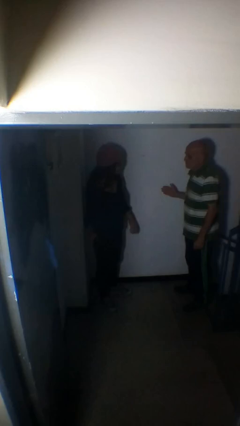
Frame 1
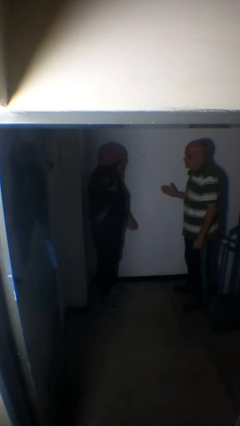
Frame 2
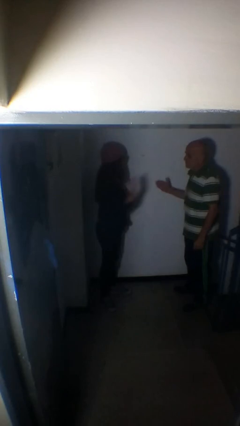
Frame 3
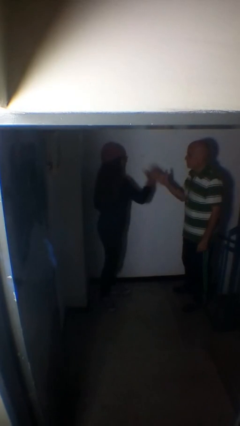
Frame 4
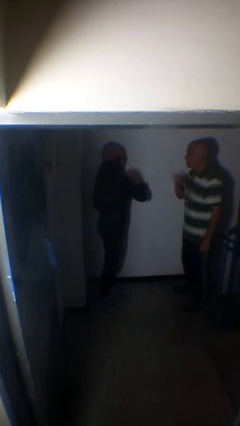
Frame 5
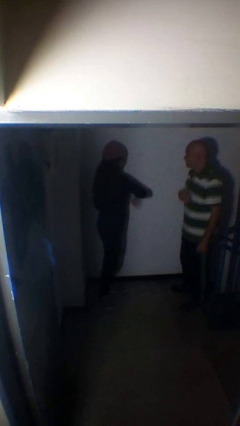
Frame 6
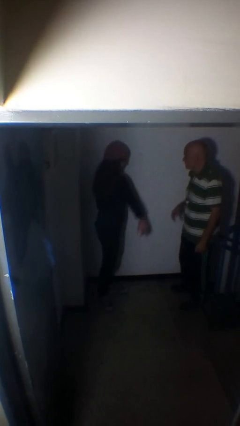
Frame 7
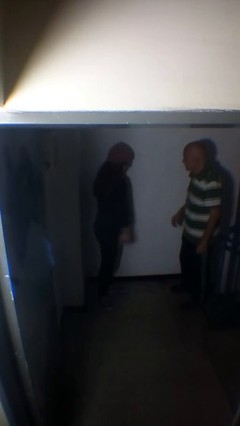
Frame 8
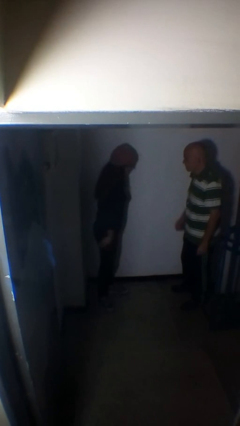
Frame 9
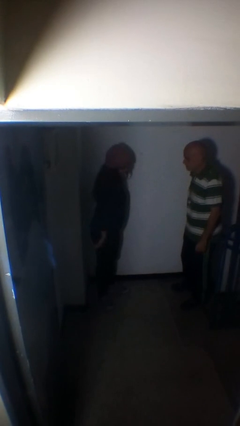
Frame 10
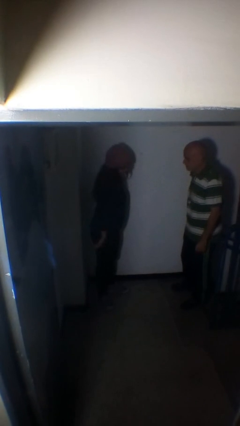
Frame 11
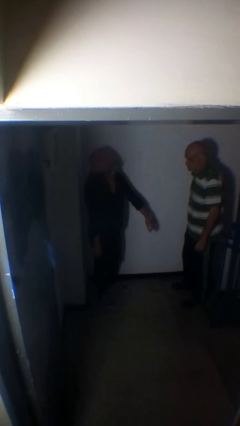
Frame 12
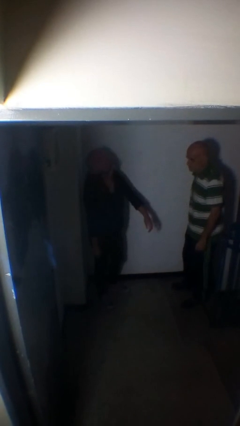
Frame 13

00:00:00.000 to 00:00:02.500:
person highfives hand

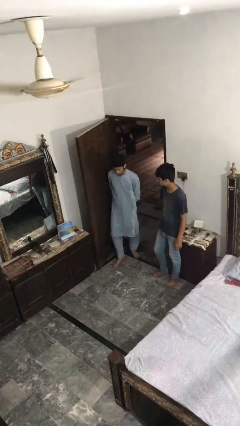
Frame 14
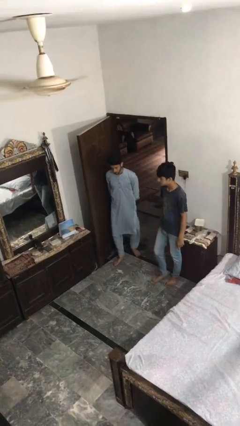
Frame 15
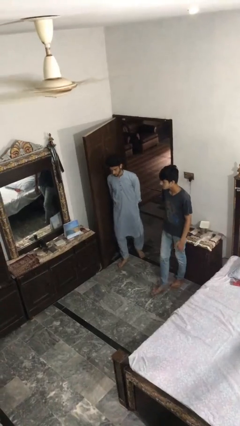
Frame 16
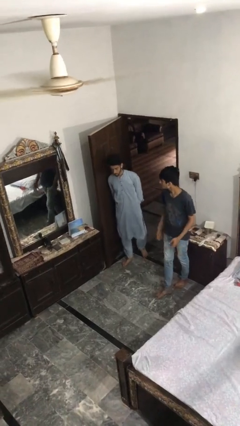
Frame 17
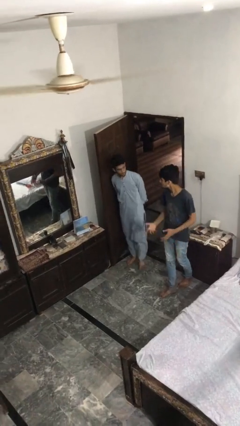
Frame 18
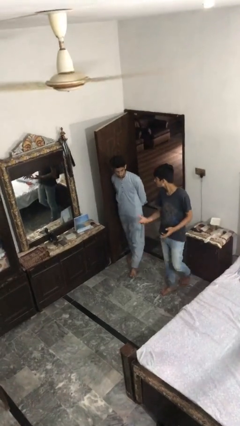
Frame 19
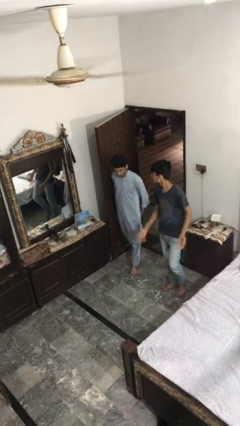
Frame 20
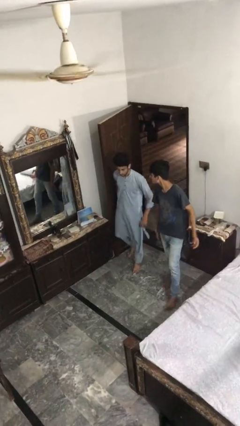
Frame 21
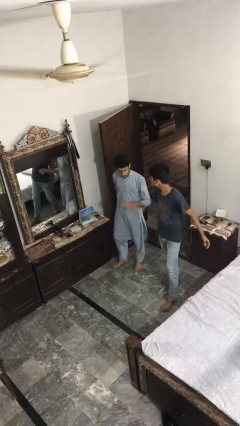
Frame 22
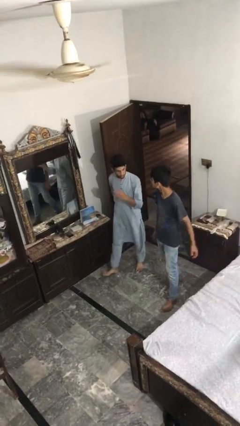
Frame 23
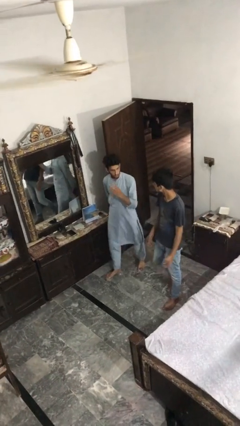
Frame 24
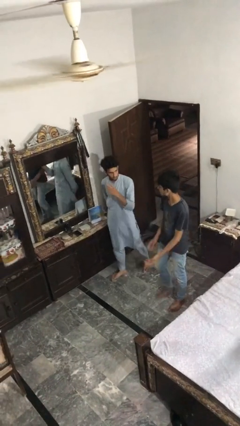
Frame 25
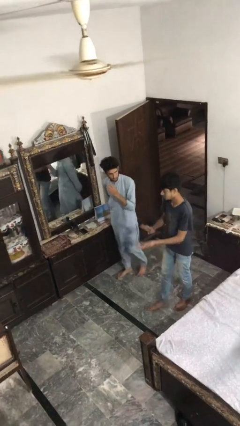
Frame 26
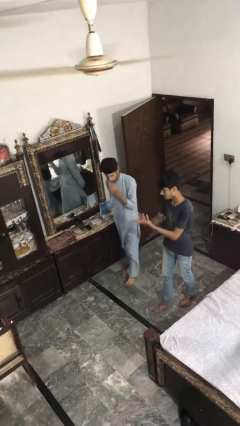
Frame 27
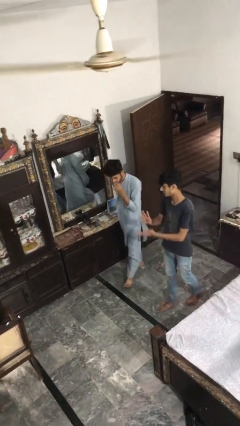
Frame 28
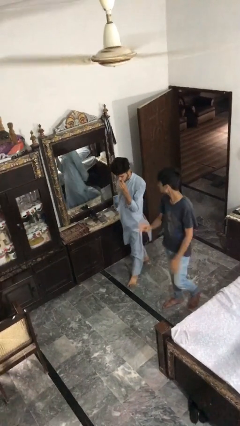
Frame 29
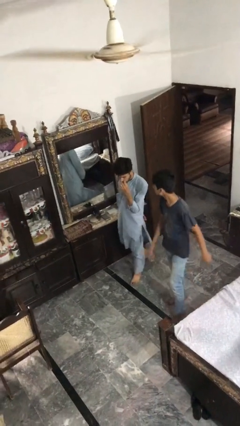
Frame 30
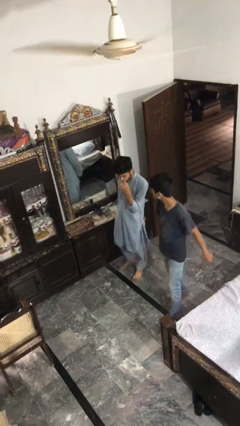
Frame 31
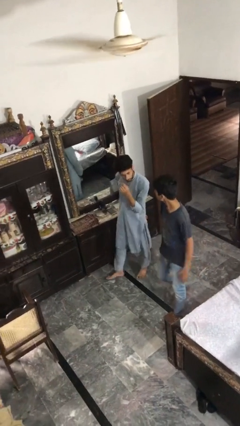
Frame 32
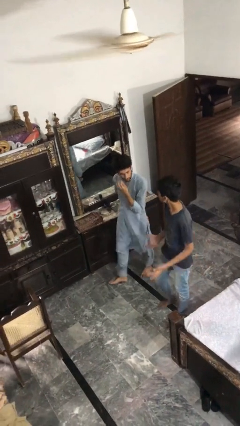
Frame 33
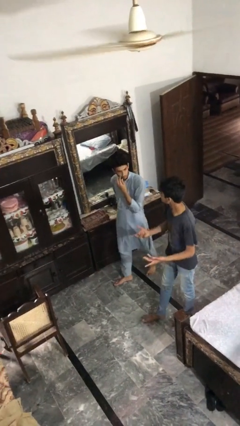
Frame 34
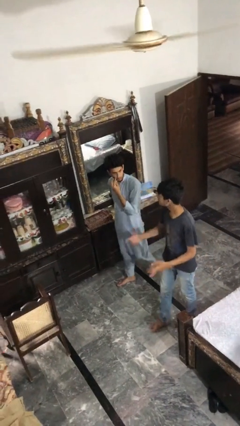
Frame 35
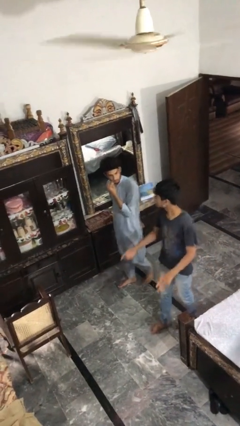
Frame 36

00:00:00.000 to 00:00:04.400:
person talks to person

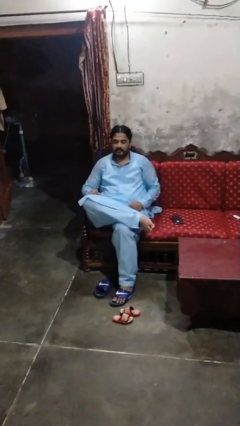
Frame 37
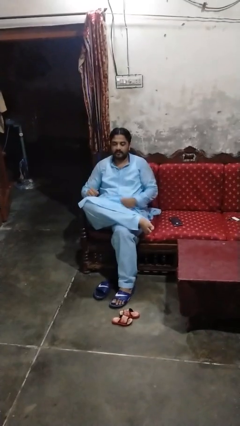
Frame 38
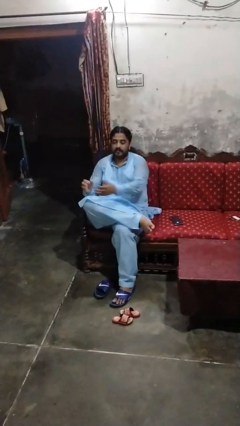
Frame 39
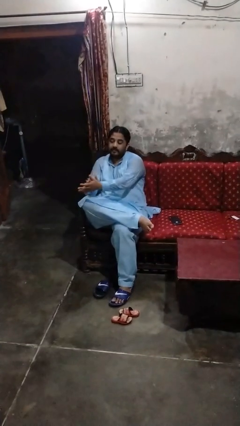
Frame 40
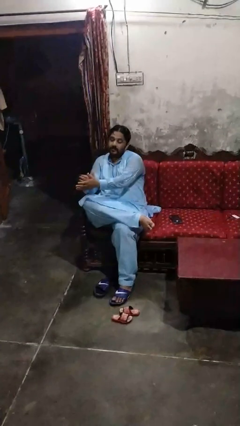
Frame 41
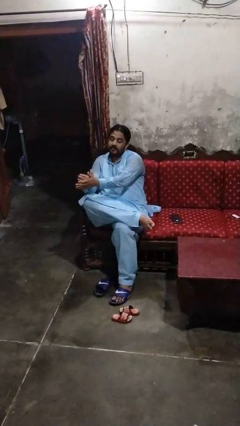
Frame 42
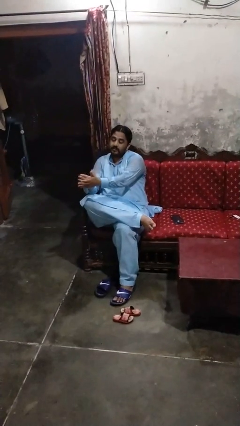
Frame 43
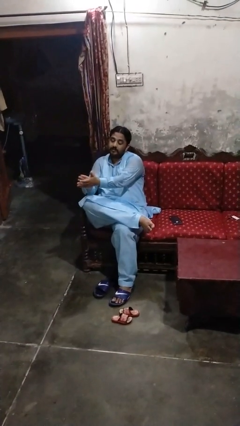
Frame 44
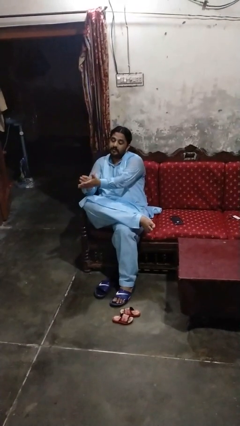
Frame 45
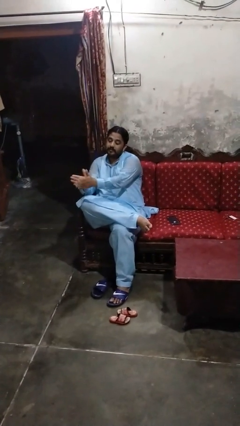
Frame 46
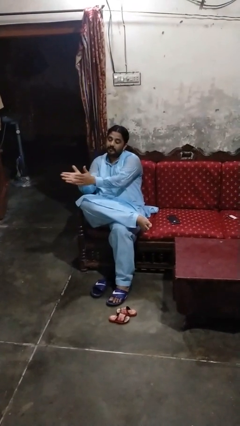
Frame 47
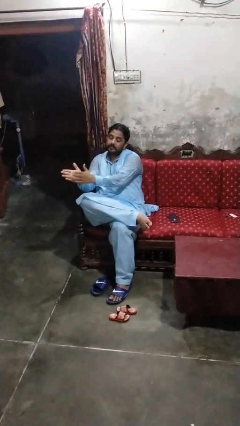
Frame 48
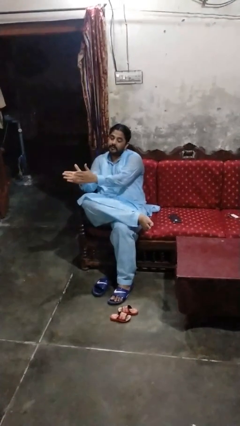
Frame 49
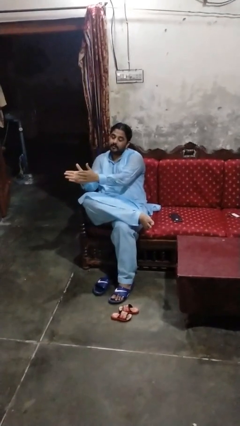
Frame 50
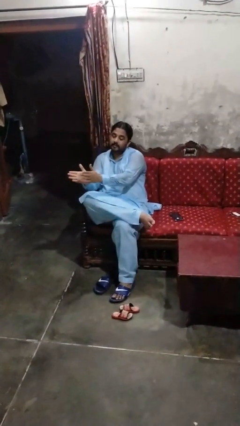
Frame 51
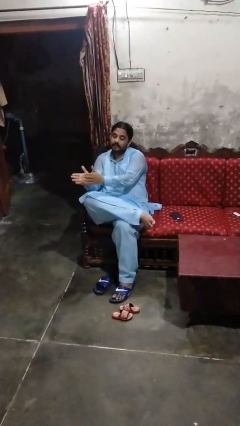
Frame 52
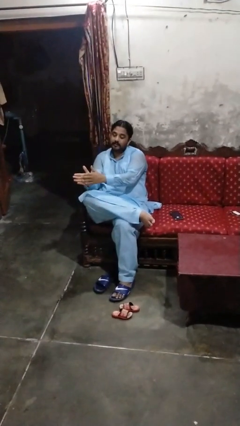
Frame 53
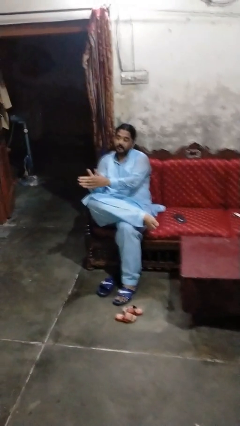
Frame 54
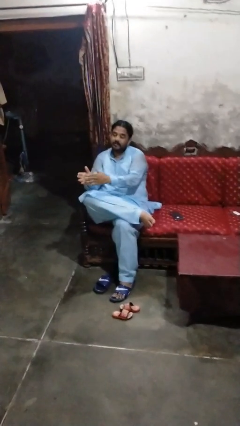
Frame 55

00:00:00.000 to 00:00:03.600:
person claps hands

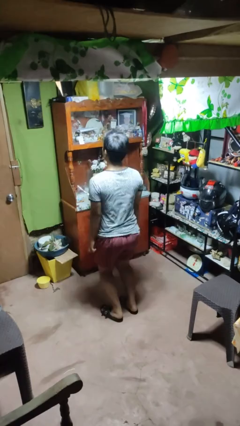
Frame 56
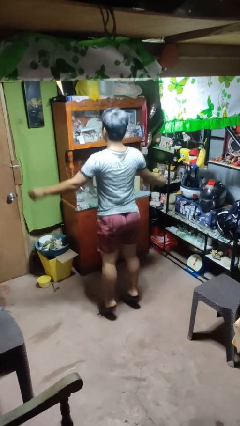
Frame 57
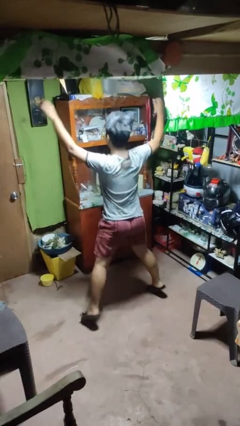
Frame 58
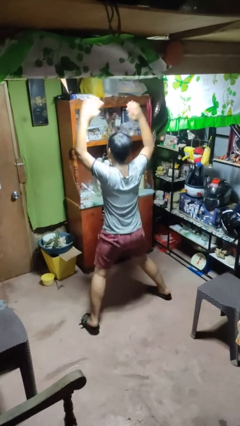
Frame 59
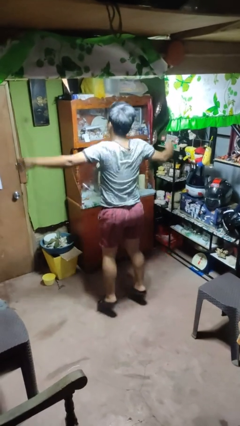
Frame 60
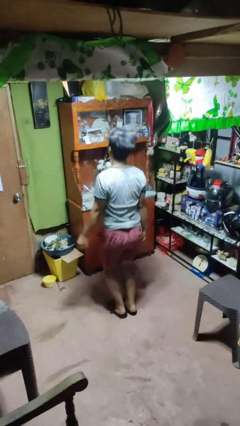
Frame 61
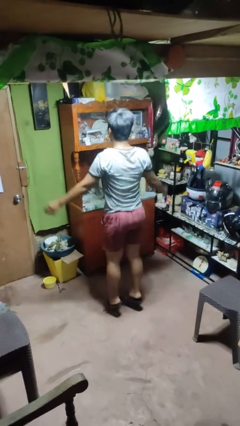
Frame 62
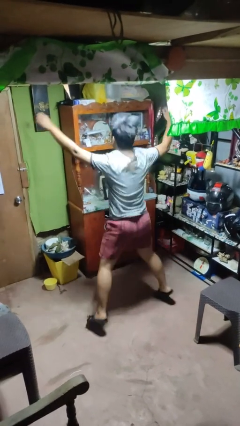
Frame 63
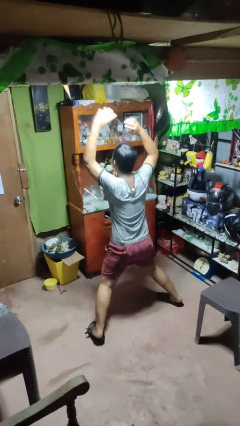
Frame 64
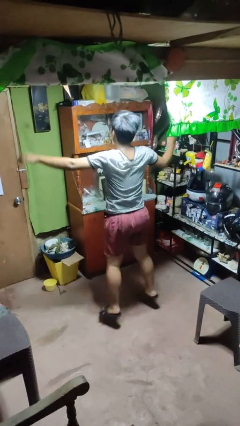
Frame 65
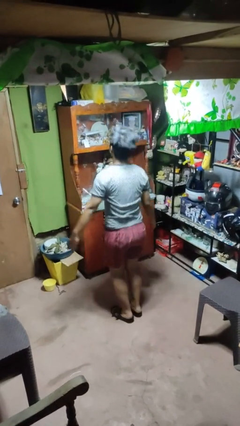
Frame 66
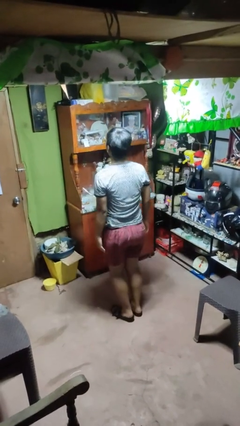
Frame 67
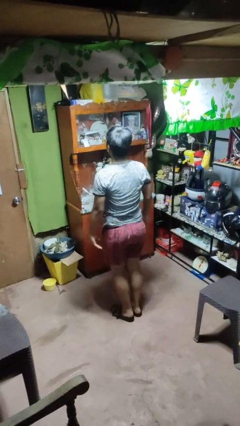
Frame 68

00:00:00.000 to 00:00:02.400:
person exercises with jumping jacks

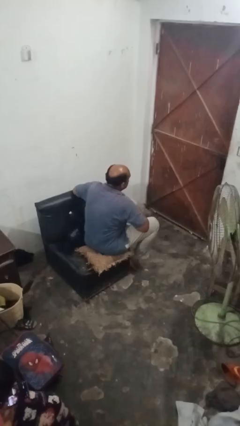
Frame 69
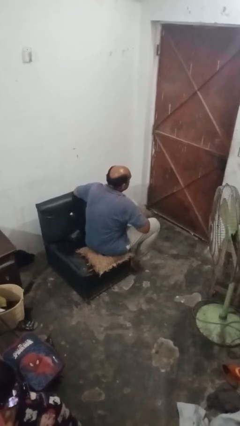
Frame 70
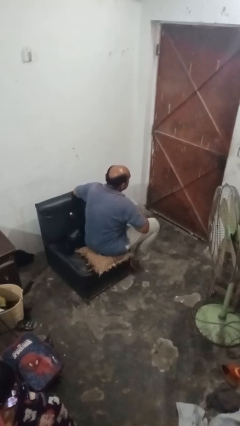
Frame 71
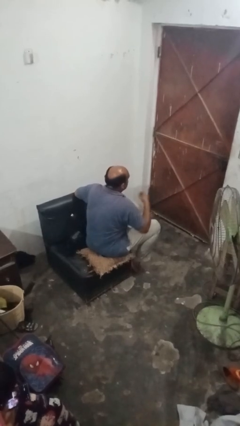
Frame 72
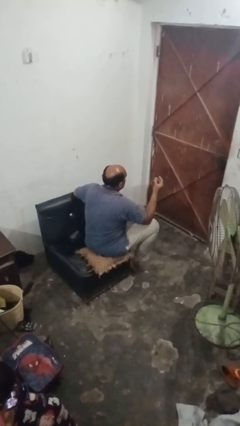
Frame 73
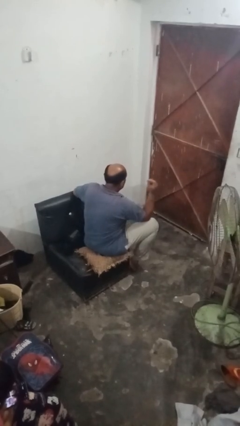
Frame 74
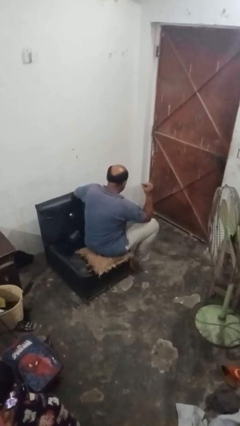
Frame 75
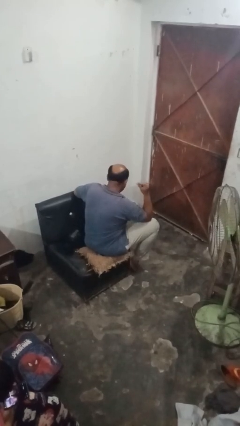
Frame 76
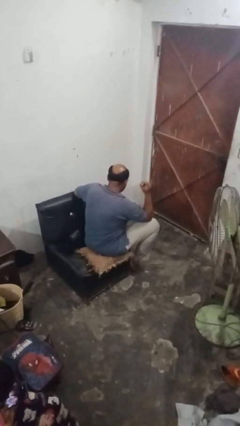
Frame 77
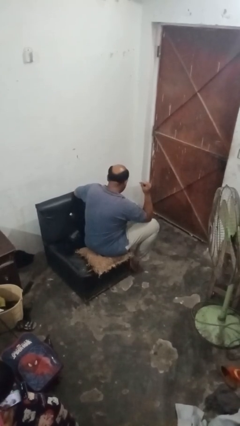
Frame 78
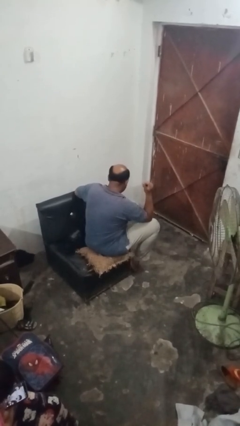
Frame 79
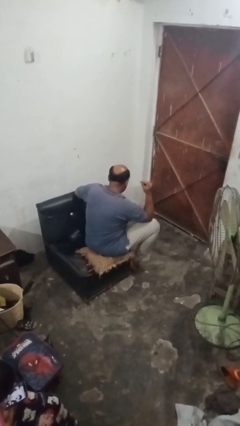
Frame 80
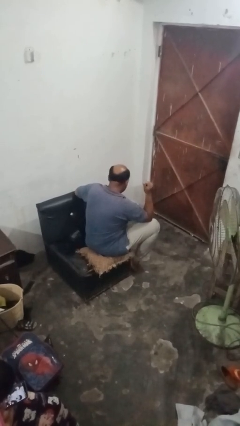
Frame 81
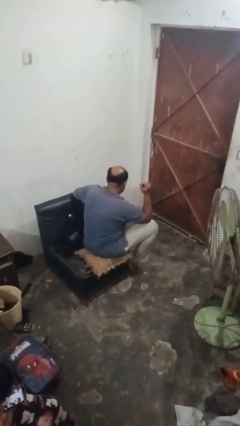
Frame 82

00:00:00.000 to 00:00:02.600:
person snaps fingers

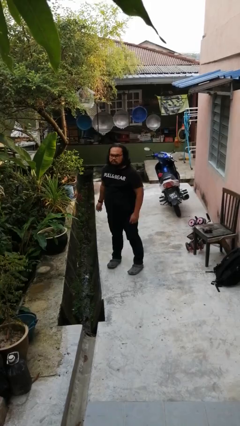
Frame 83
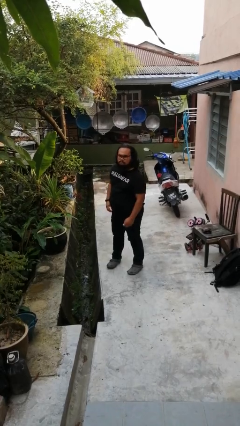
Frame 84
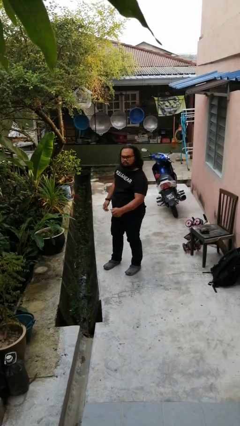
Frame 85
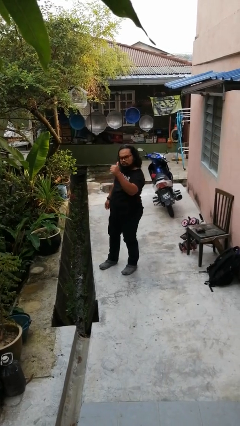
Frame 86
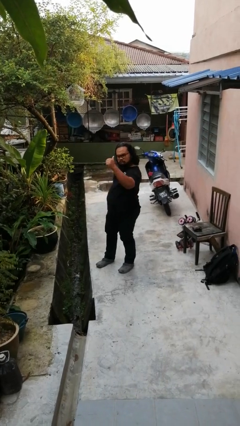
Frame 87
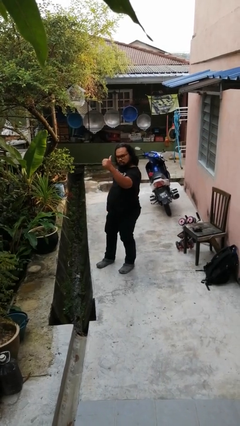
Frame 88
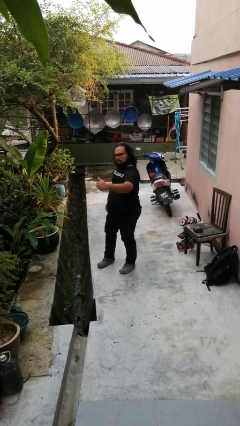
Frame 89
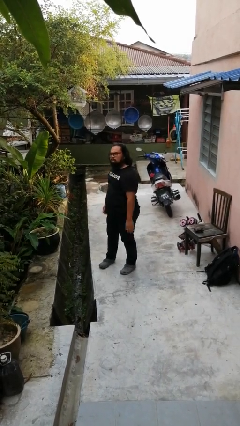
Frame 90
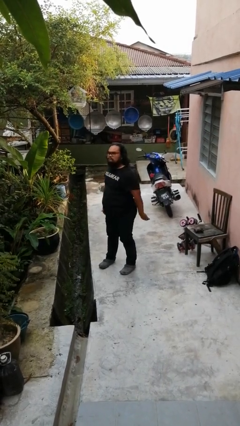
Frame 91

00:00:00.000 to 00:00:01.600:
person gestures thumbs up

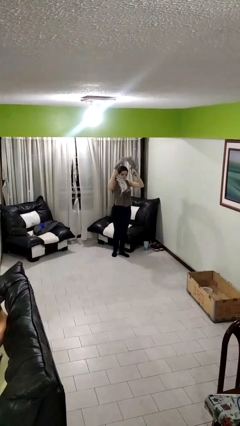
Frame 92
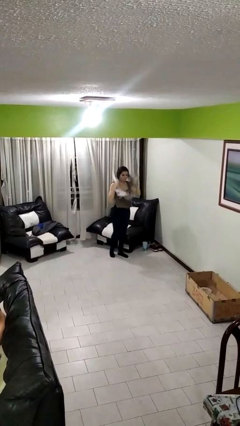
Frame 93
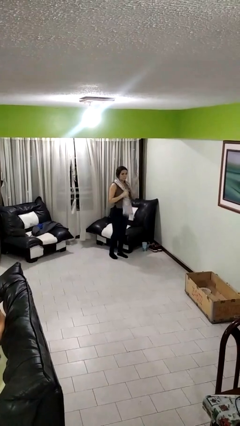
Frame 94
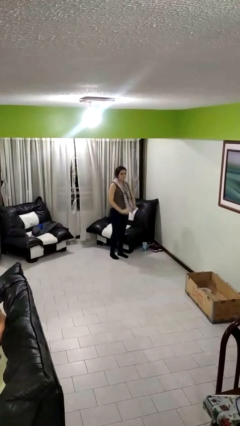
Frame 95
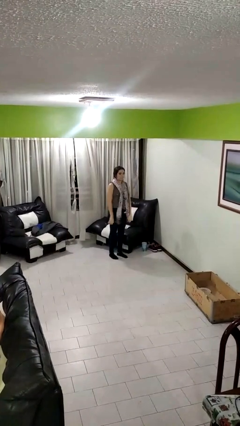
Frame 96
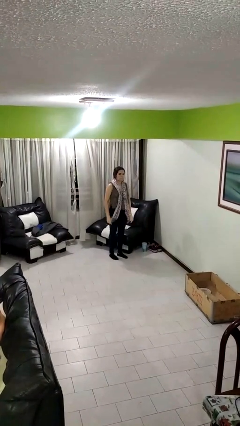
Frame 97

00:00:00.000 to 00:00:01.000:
person puts on scarf
